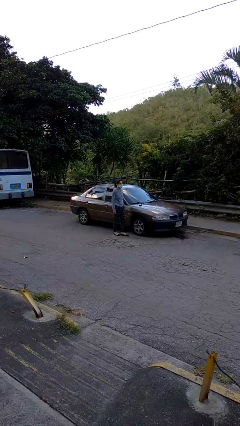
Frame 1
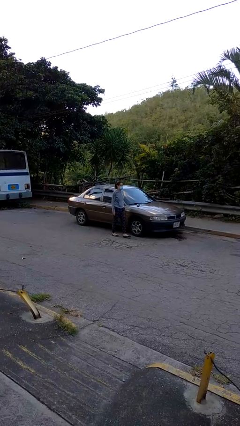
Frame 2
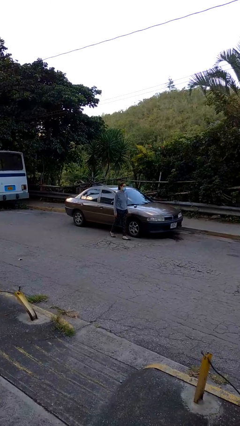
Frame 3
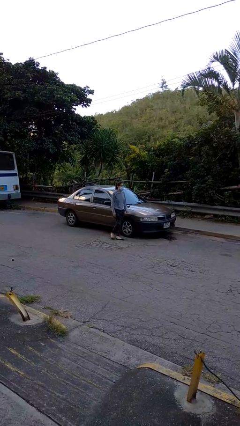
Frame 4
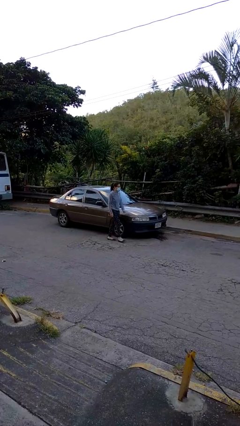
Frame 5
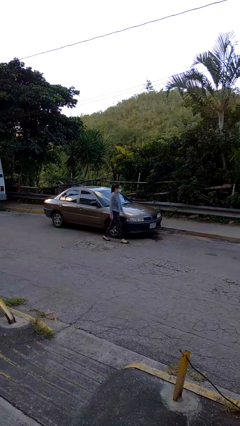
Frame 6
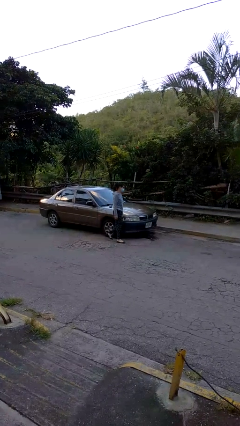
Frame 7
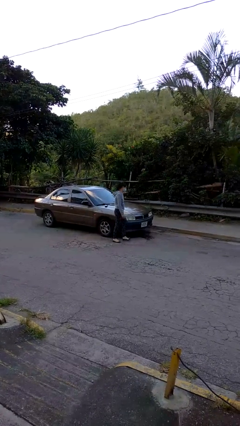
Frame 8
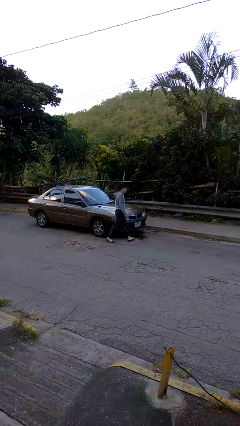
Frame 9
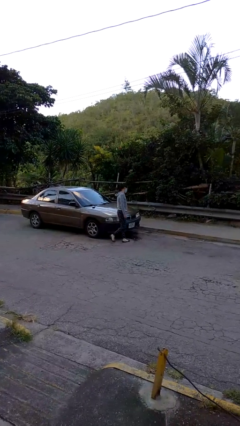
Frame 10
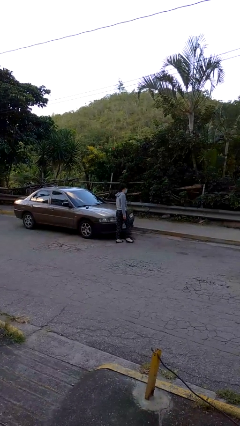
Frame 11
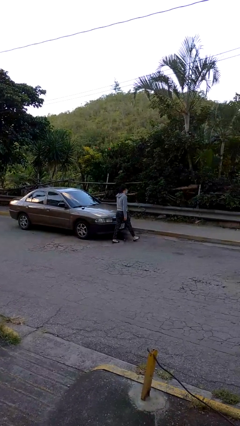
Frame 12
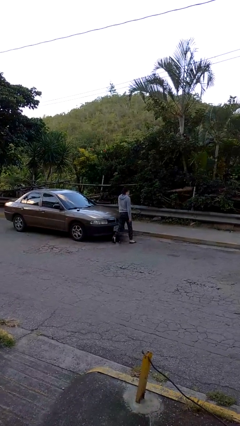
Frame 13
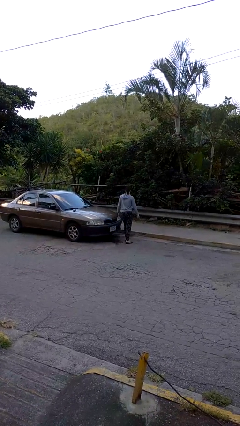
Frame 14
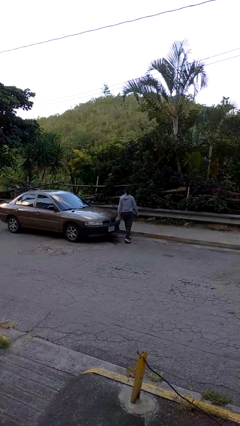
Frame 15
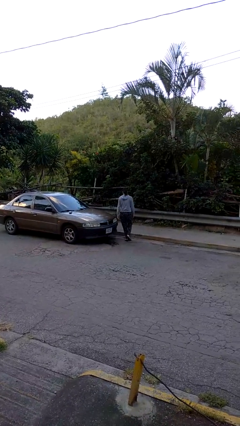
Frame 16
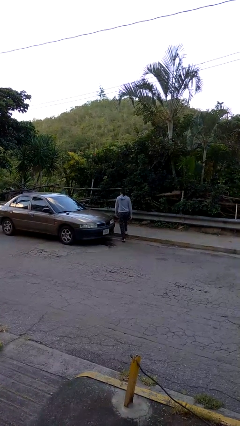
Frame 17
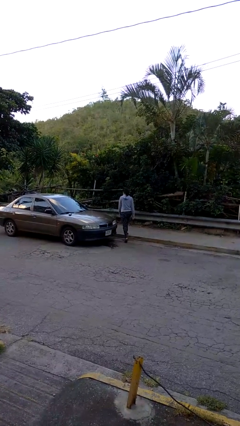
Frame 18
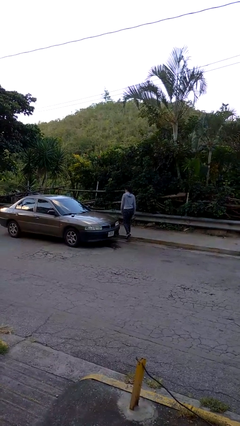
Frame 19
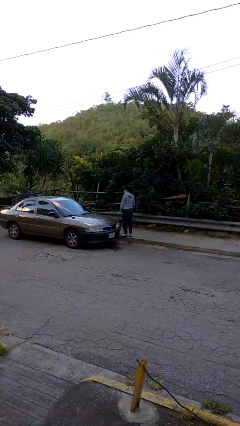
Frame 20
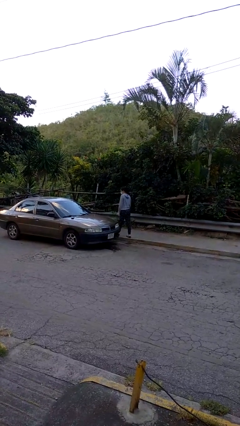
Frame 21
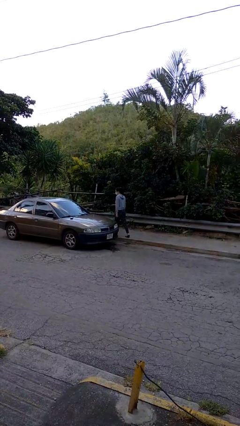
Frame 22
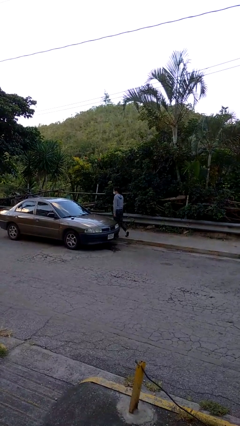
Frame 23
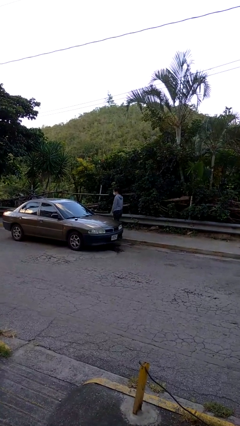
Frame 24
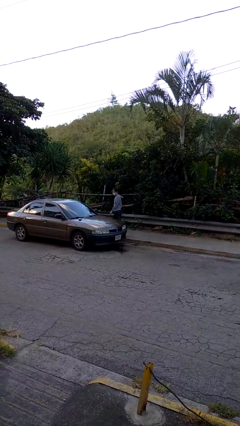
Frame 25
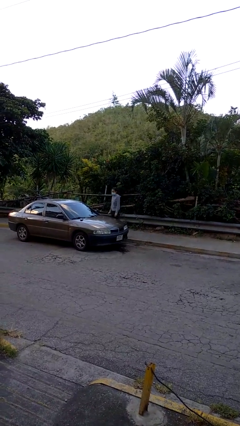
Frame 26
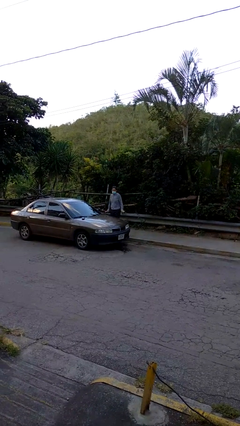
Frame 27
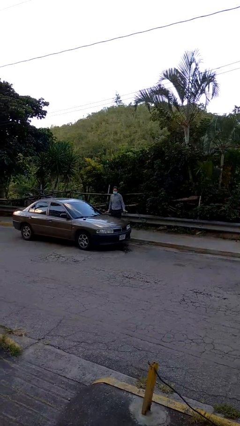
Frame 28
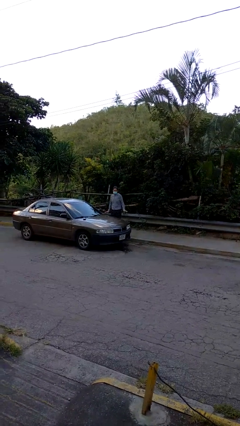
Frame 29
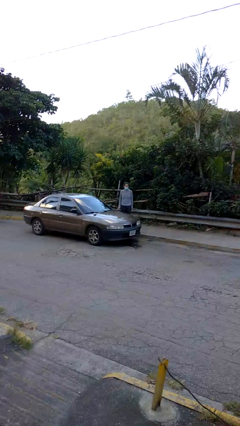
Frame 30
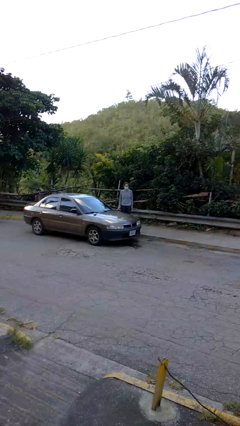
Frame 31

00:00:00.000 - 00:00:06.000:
person walks around car

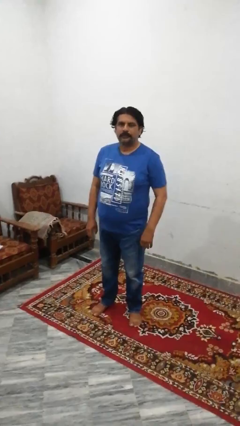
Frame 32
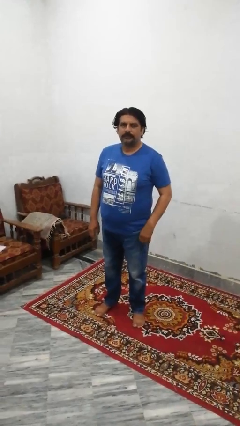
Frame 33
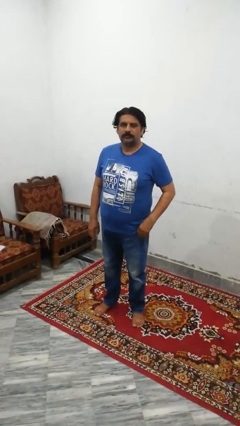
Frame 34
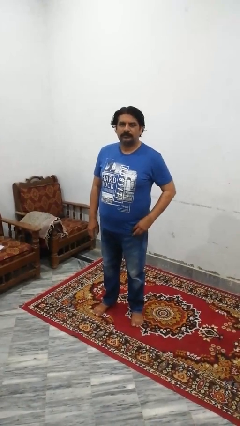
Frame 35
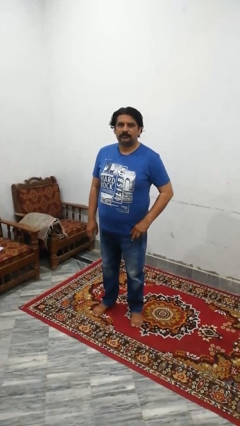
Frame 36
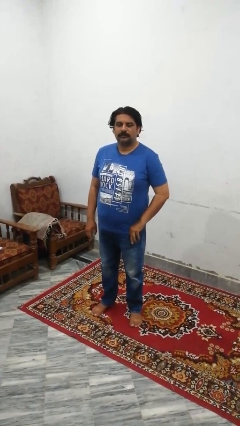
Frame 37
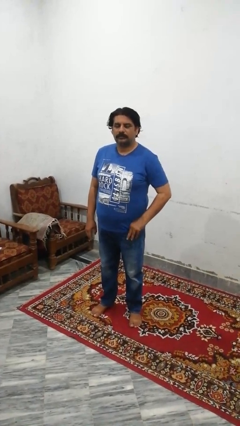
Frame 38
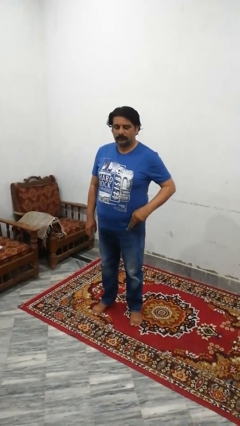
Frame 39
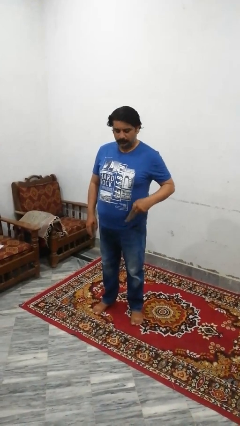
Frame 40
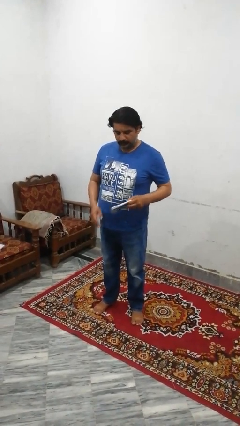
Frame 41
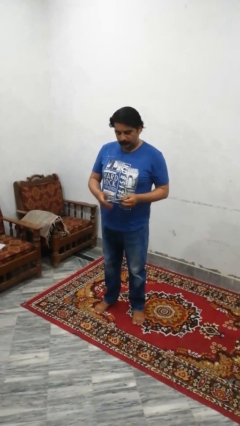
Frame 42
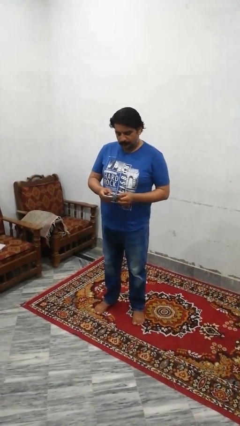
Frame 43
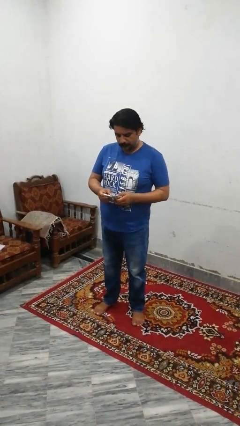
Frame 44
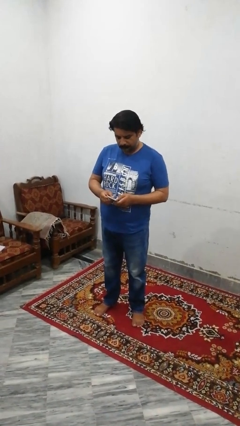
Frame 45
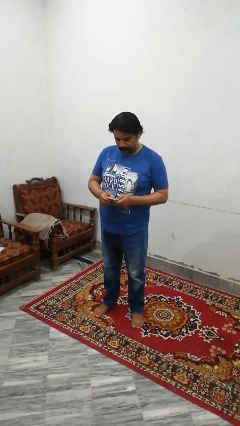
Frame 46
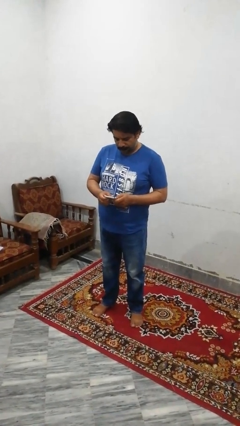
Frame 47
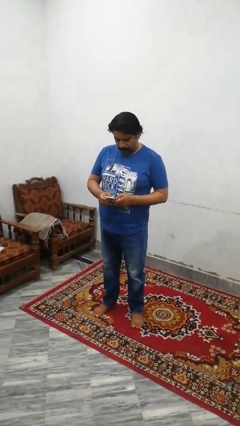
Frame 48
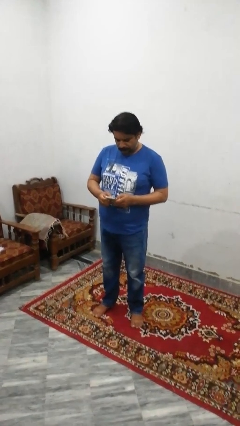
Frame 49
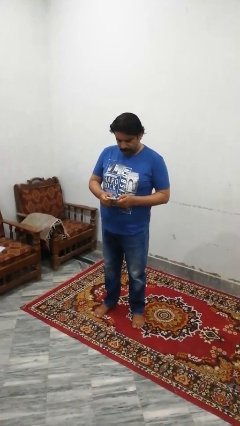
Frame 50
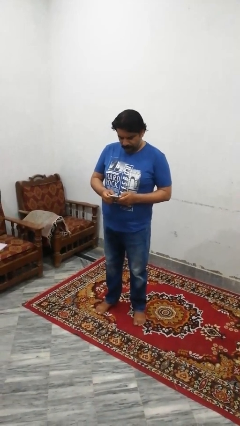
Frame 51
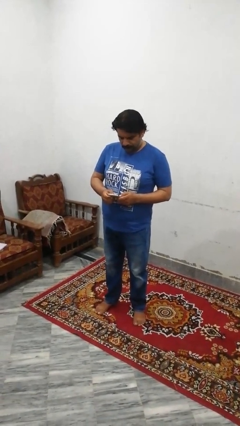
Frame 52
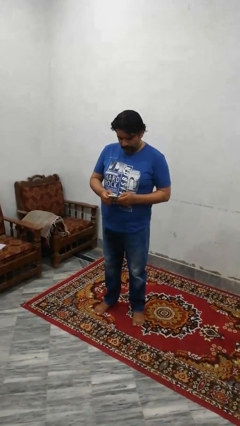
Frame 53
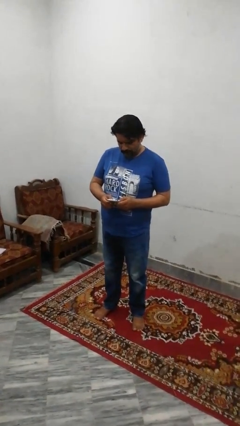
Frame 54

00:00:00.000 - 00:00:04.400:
person takes phone from pocket

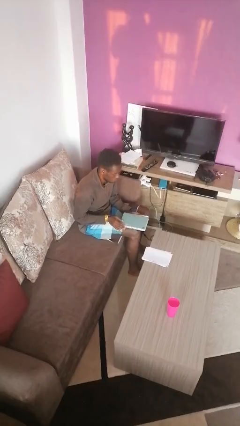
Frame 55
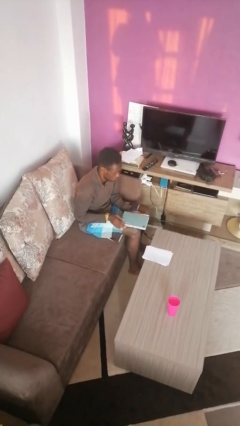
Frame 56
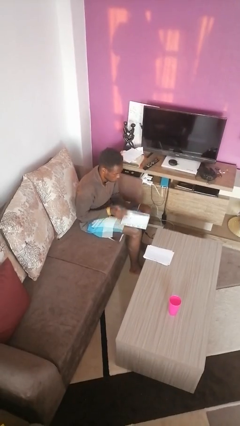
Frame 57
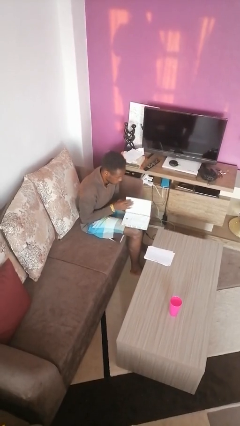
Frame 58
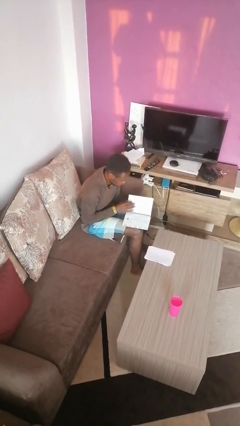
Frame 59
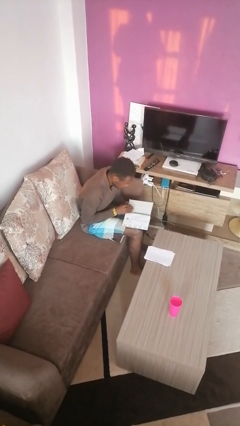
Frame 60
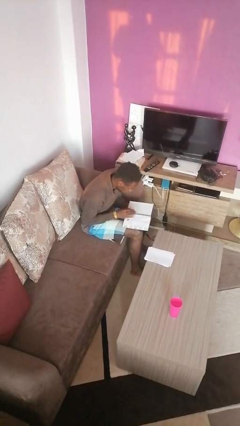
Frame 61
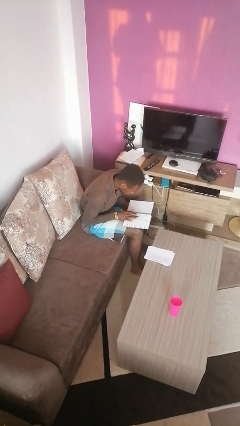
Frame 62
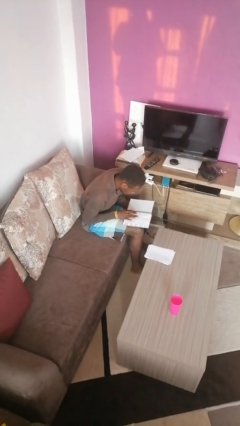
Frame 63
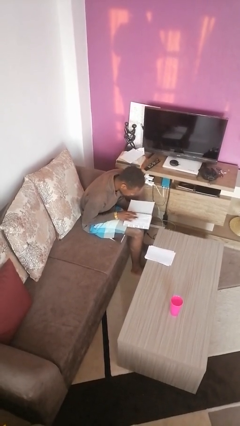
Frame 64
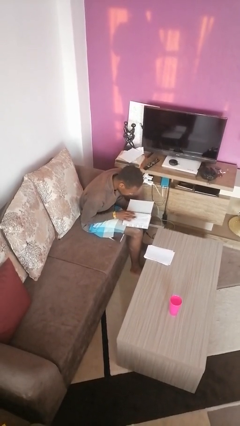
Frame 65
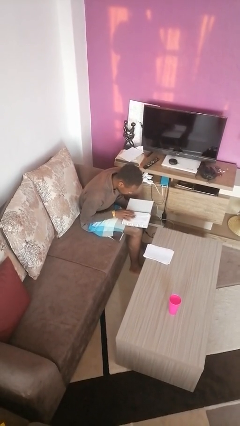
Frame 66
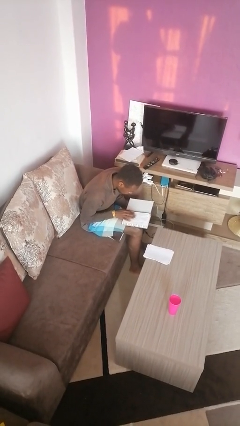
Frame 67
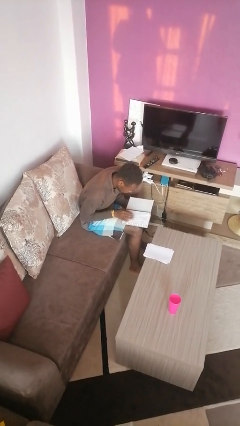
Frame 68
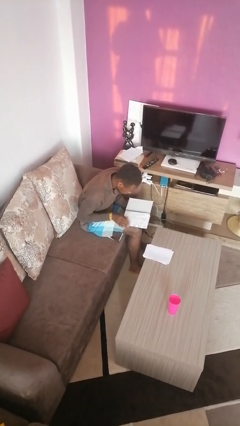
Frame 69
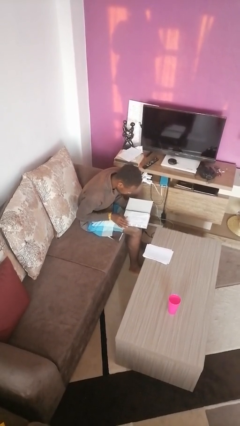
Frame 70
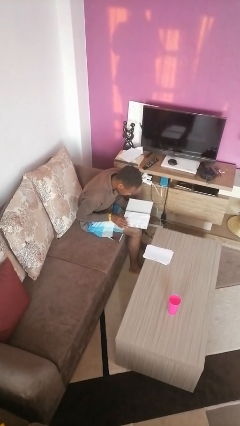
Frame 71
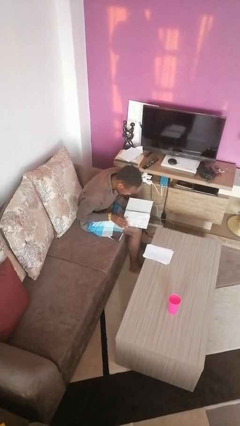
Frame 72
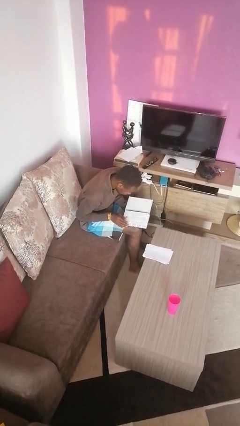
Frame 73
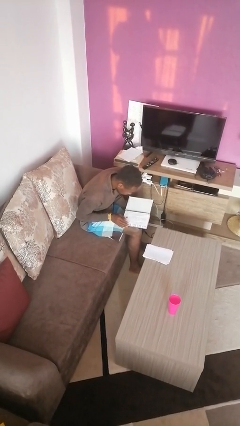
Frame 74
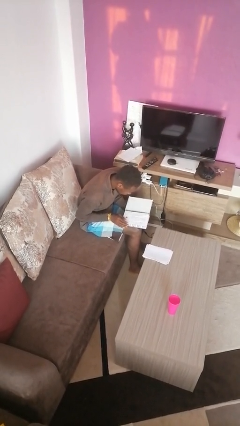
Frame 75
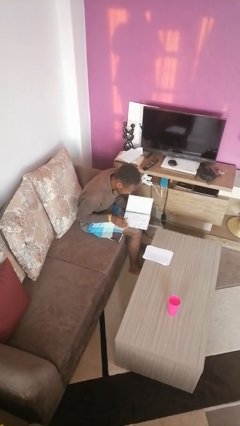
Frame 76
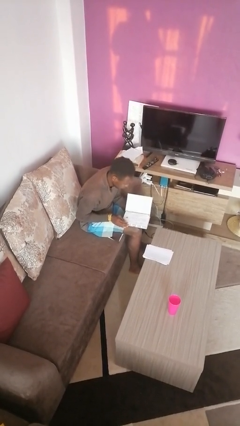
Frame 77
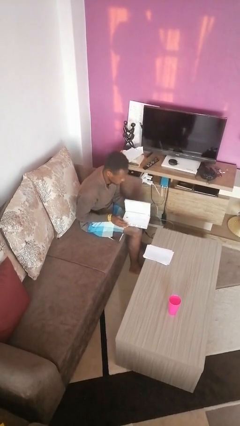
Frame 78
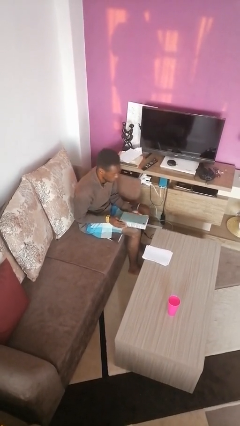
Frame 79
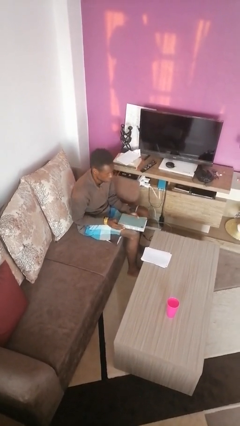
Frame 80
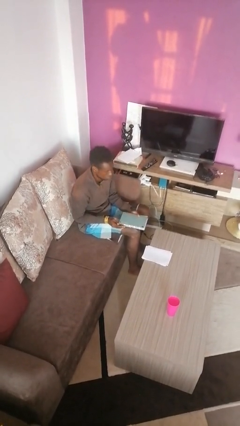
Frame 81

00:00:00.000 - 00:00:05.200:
person reads book

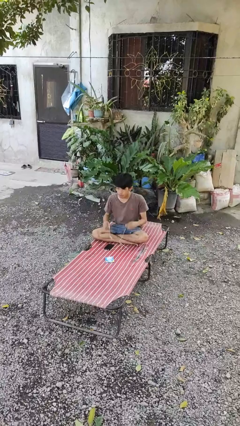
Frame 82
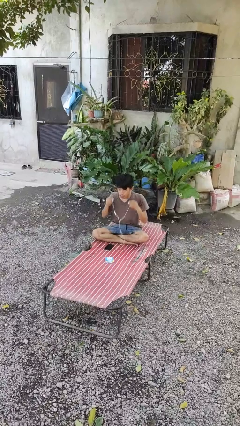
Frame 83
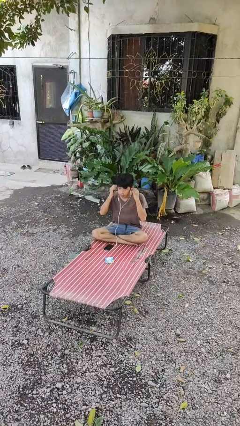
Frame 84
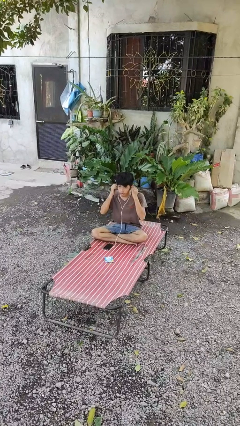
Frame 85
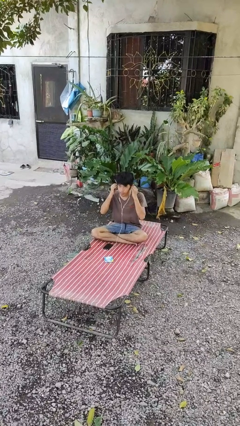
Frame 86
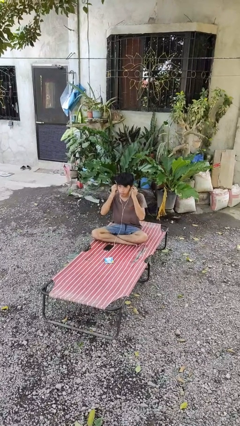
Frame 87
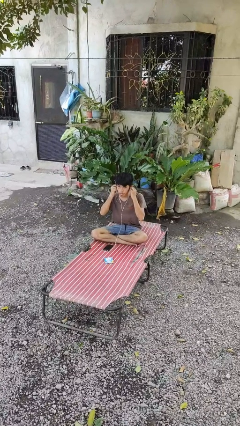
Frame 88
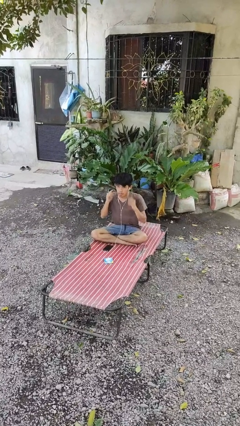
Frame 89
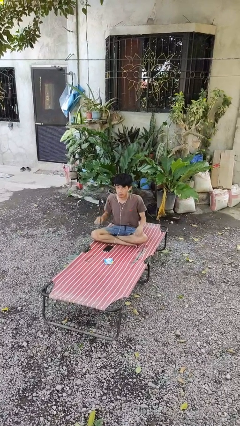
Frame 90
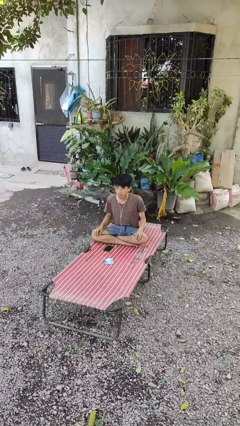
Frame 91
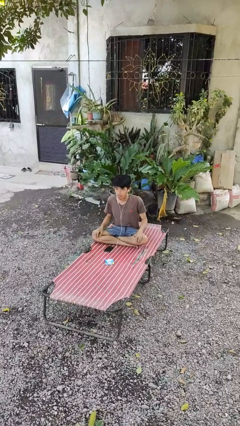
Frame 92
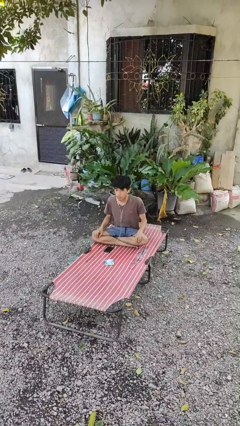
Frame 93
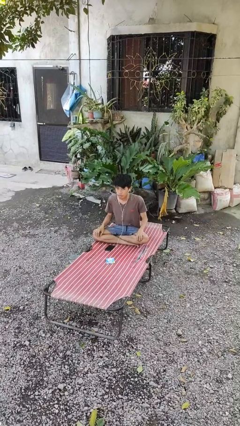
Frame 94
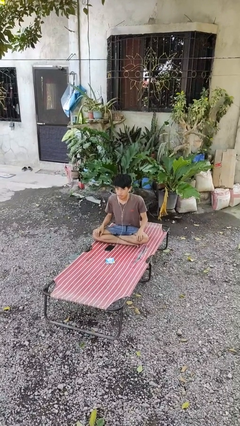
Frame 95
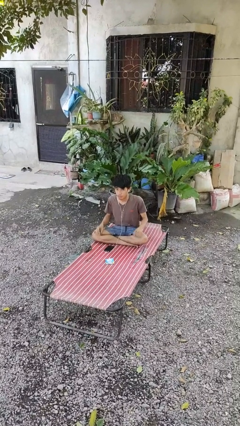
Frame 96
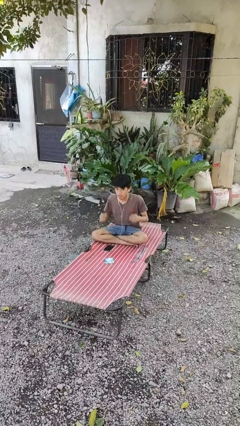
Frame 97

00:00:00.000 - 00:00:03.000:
person puts on headphones
